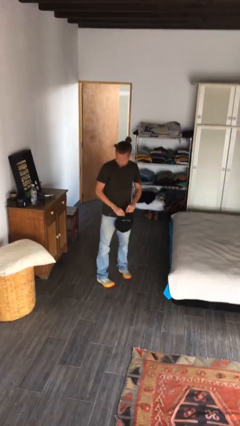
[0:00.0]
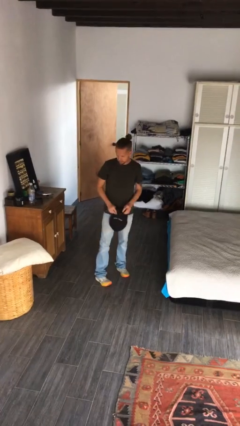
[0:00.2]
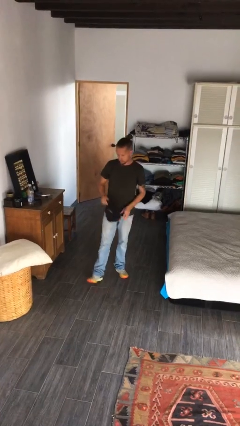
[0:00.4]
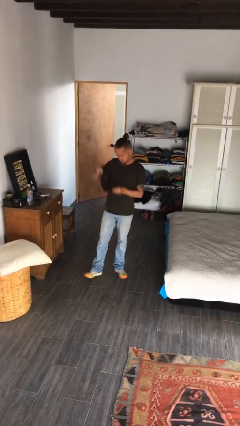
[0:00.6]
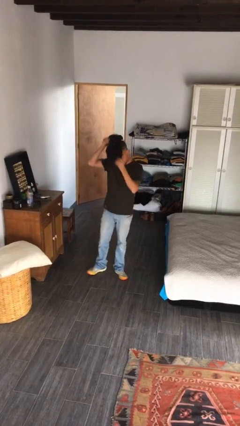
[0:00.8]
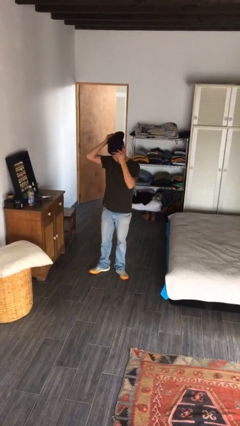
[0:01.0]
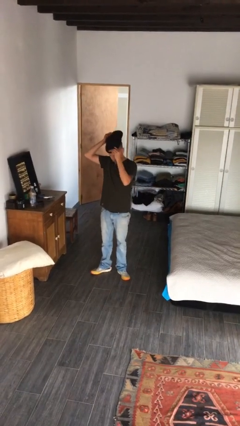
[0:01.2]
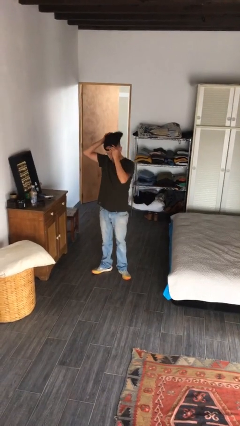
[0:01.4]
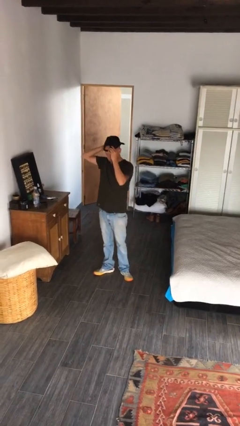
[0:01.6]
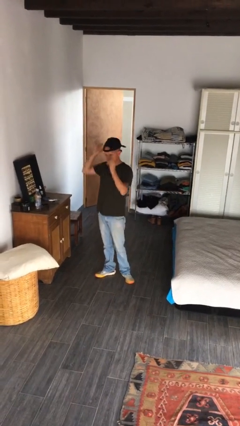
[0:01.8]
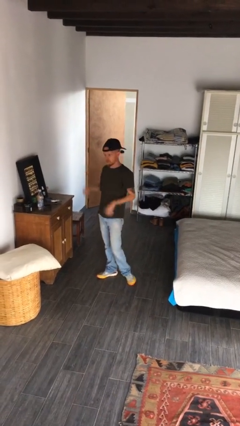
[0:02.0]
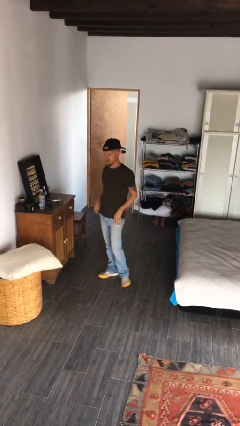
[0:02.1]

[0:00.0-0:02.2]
person puts on hat

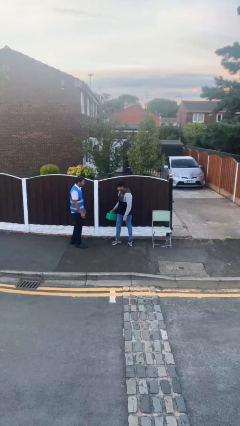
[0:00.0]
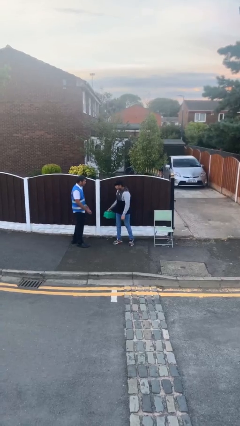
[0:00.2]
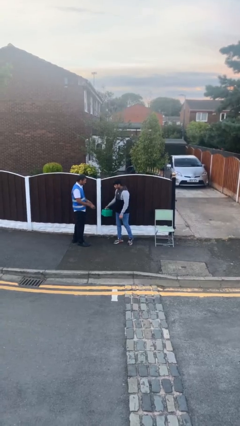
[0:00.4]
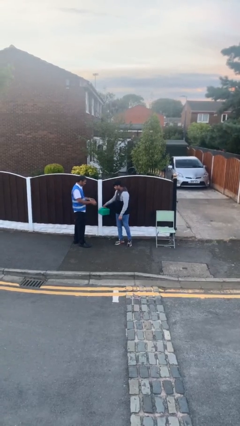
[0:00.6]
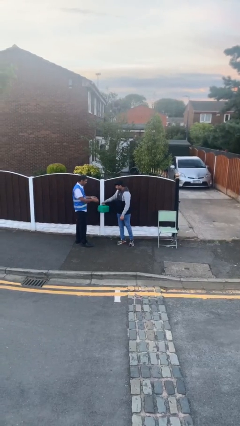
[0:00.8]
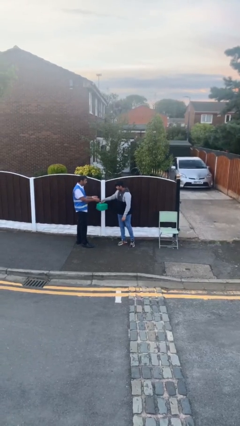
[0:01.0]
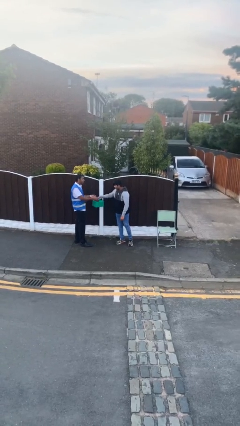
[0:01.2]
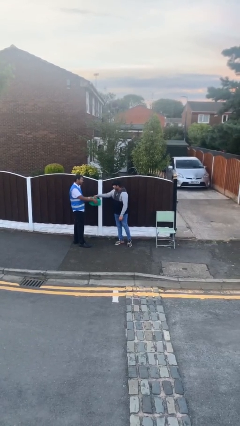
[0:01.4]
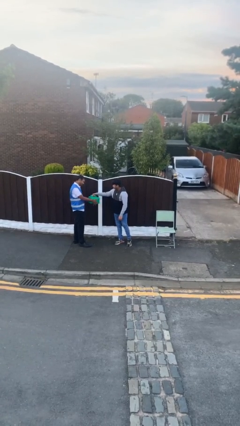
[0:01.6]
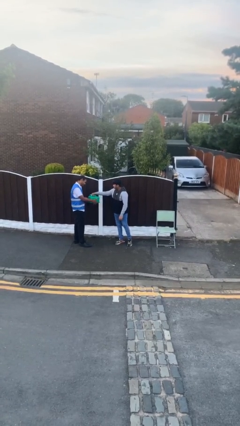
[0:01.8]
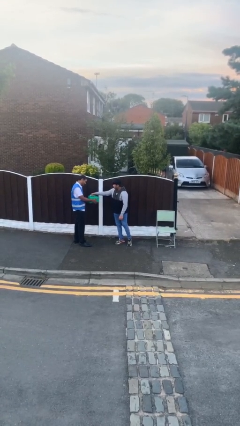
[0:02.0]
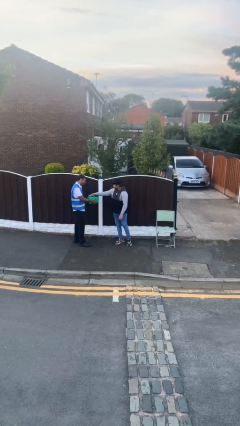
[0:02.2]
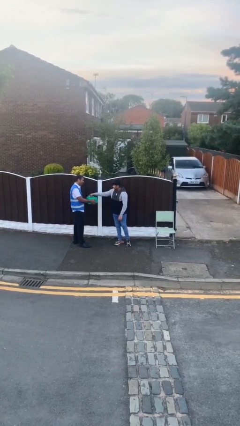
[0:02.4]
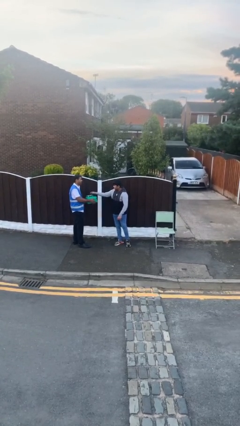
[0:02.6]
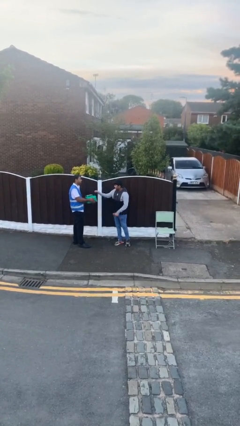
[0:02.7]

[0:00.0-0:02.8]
person transfers object to person

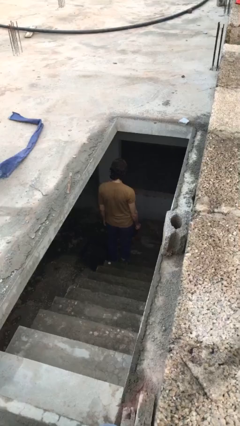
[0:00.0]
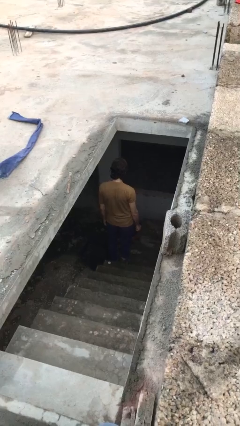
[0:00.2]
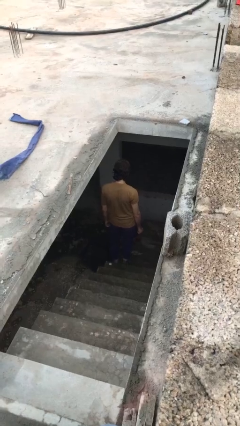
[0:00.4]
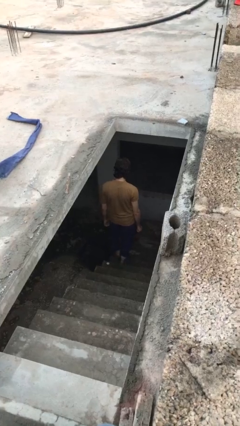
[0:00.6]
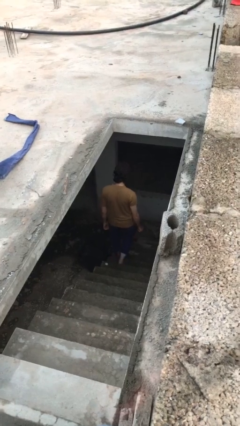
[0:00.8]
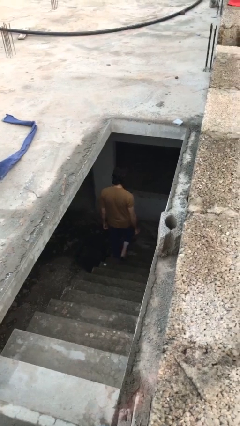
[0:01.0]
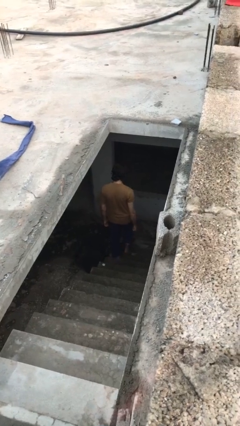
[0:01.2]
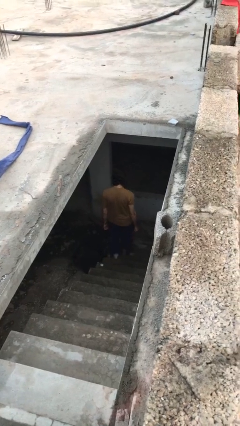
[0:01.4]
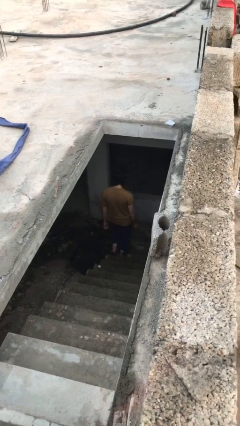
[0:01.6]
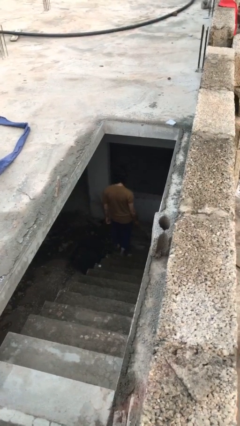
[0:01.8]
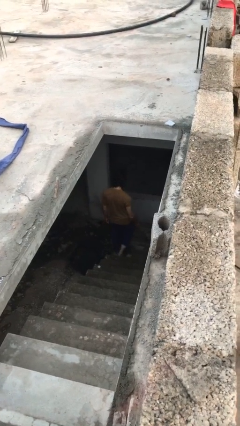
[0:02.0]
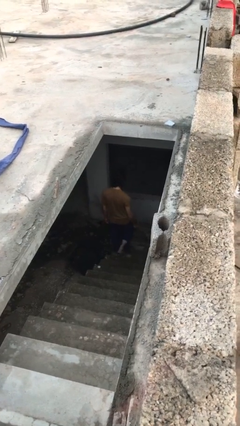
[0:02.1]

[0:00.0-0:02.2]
person climbs down stairs

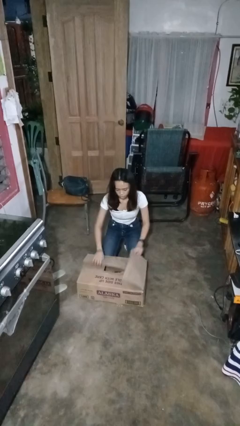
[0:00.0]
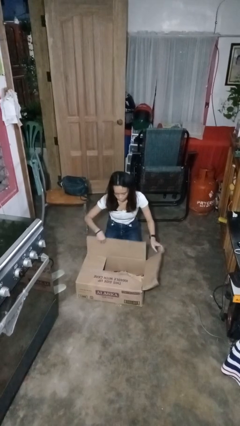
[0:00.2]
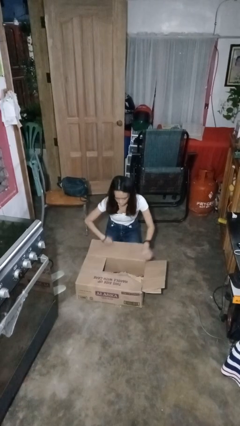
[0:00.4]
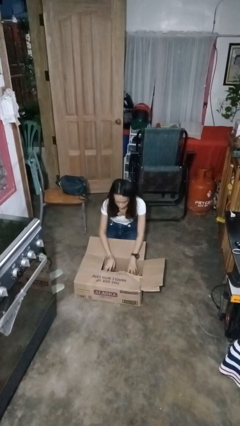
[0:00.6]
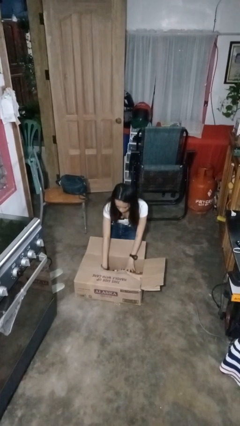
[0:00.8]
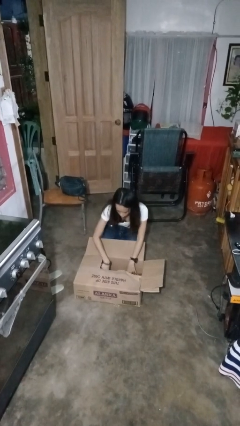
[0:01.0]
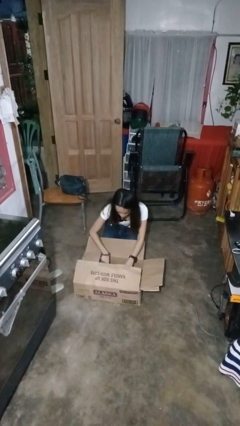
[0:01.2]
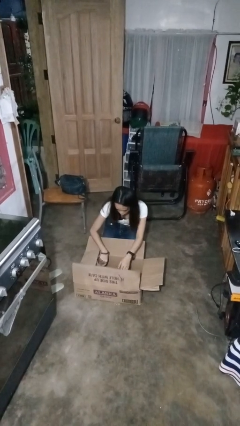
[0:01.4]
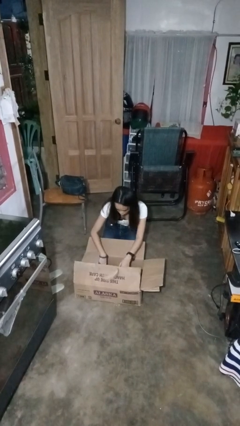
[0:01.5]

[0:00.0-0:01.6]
person searches in box

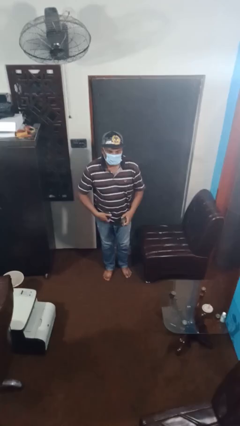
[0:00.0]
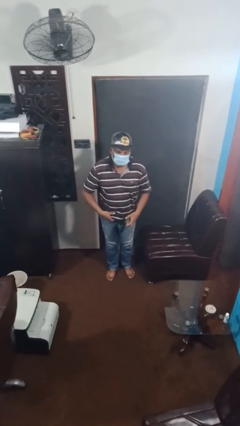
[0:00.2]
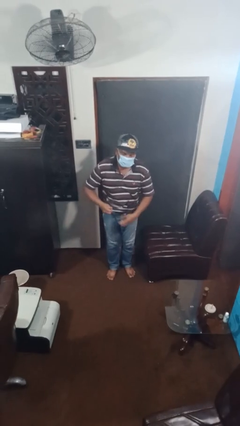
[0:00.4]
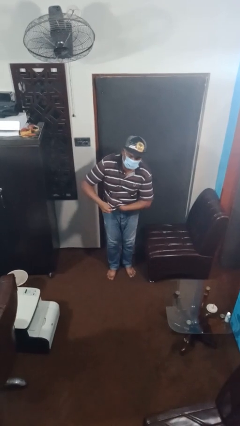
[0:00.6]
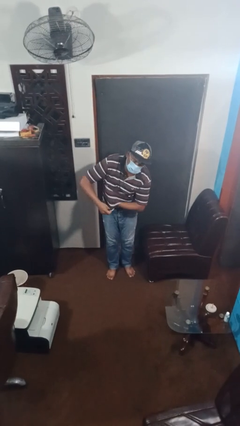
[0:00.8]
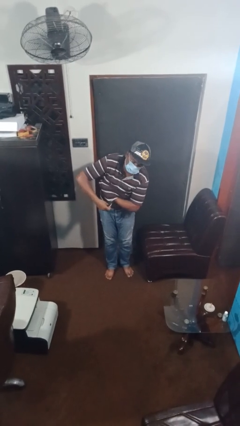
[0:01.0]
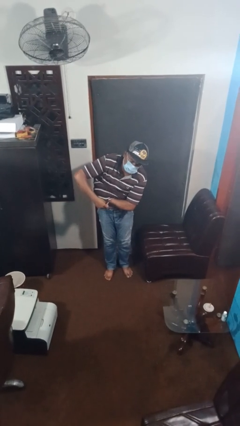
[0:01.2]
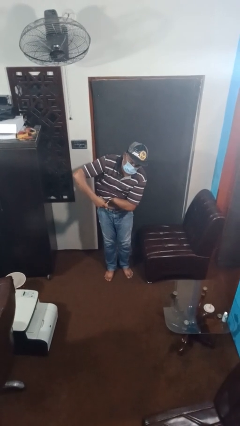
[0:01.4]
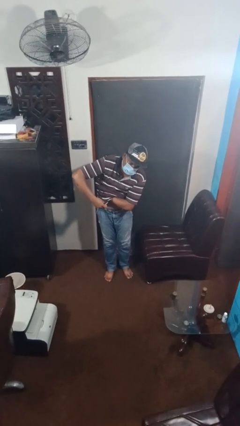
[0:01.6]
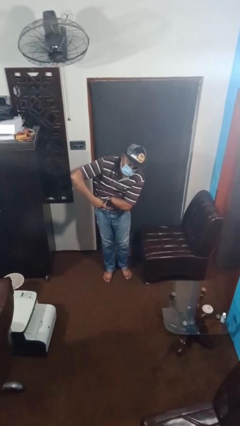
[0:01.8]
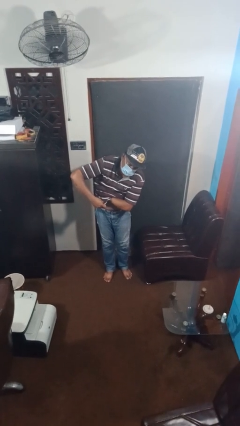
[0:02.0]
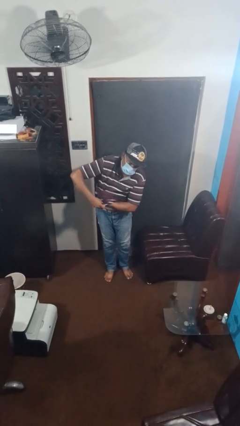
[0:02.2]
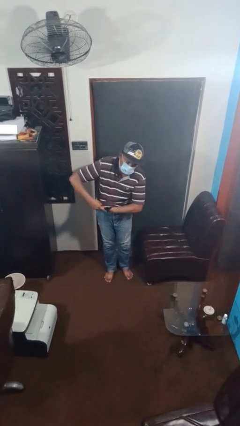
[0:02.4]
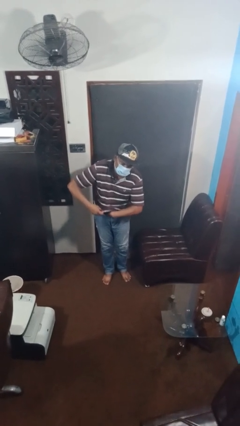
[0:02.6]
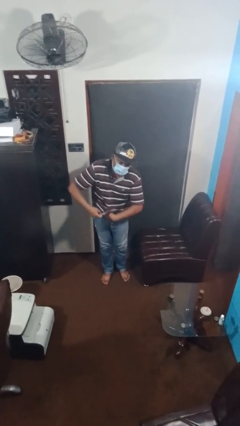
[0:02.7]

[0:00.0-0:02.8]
person applies deodorant

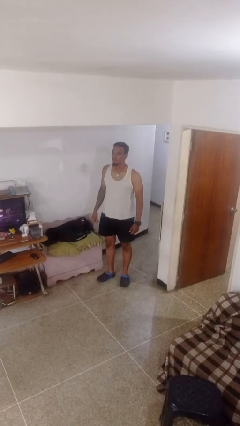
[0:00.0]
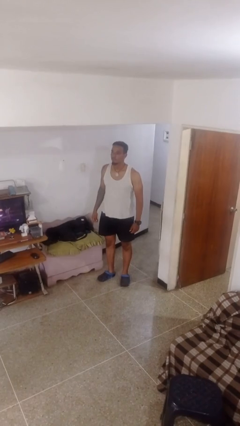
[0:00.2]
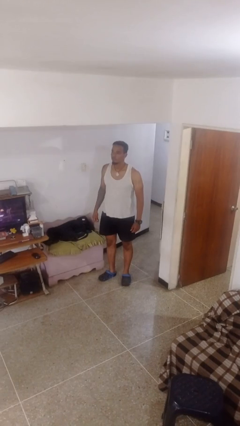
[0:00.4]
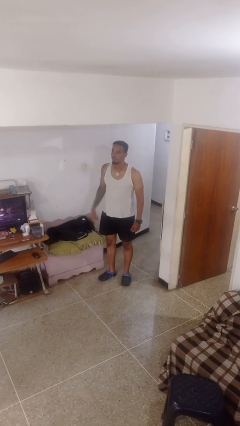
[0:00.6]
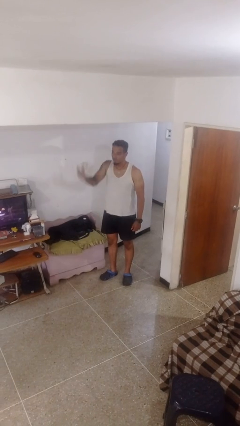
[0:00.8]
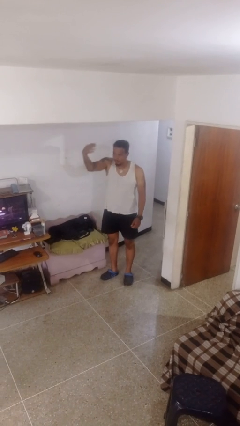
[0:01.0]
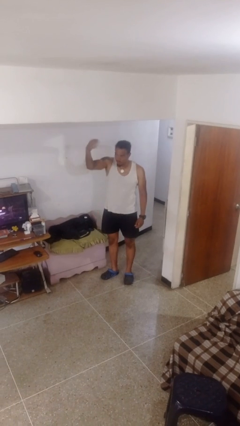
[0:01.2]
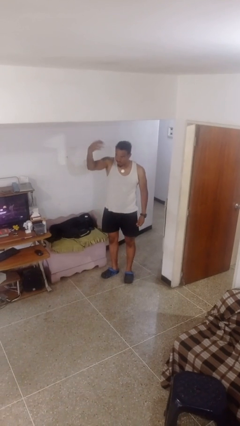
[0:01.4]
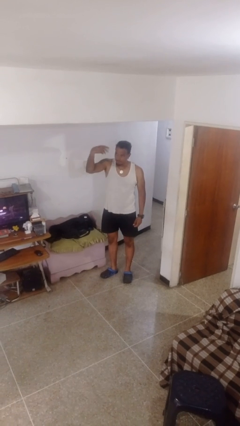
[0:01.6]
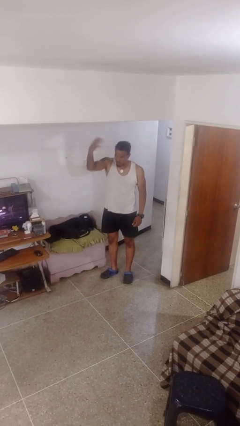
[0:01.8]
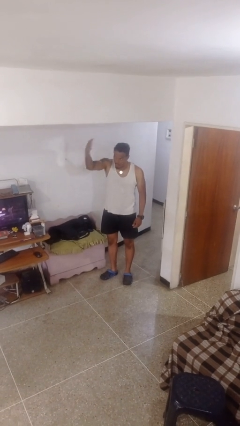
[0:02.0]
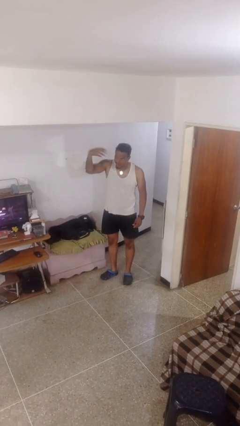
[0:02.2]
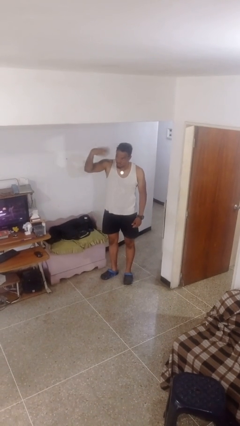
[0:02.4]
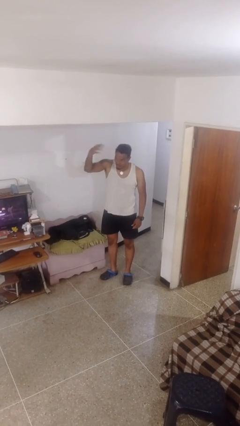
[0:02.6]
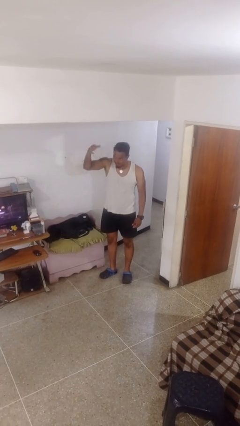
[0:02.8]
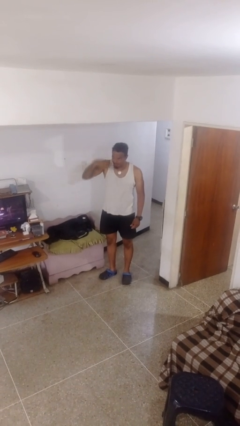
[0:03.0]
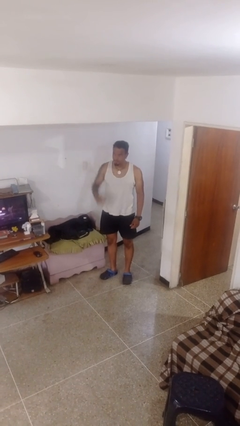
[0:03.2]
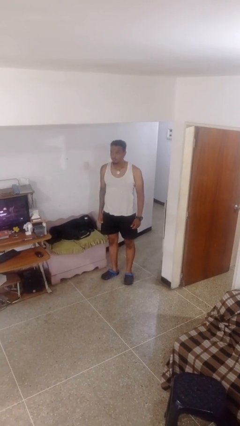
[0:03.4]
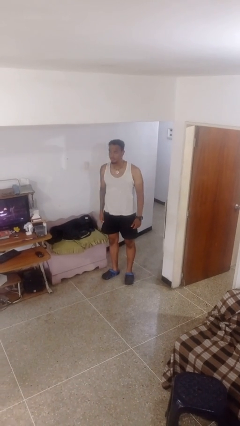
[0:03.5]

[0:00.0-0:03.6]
person gestures come here

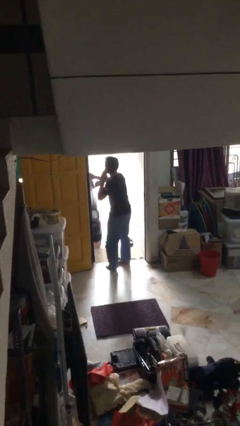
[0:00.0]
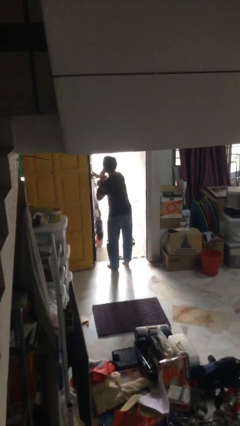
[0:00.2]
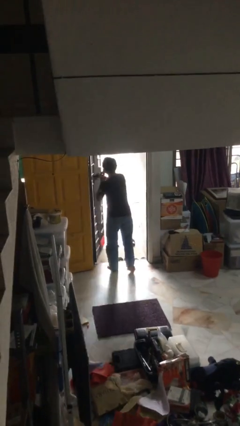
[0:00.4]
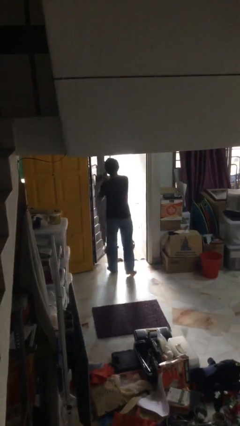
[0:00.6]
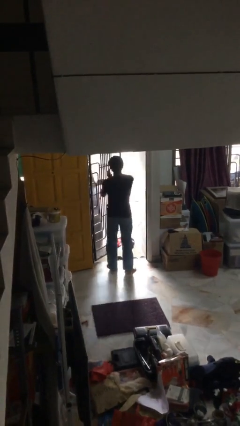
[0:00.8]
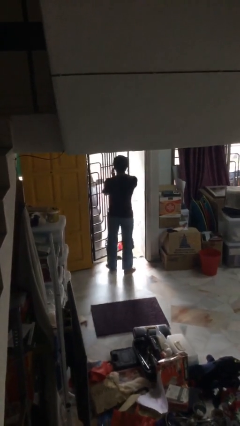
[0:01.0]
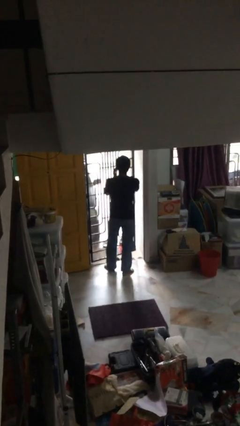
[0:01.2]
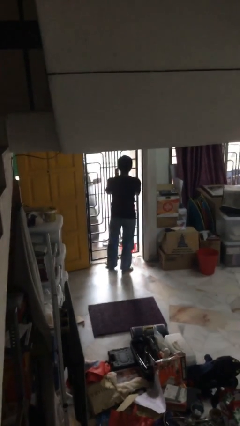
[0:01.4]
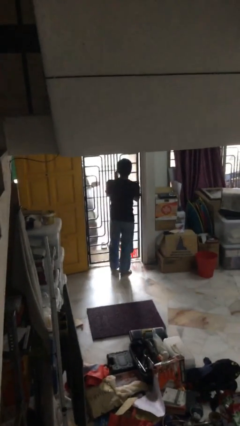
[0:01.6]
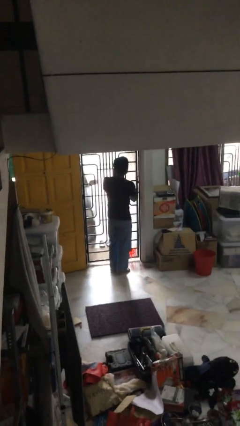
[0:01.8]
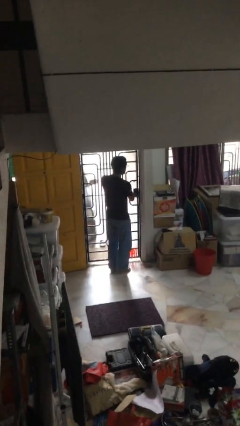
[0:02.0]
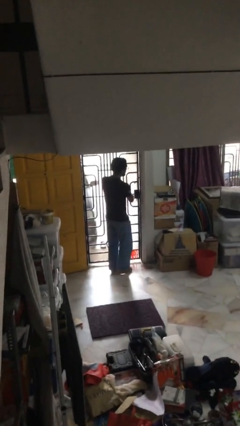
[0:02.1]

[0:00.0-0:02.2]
person closes facility door
